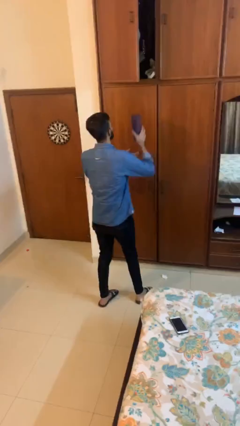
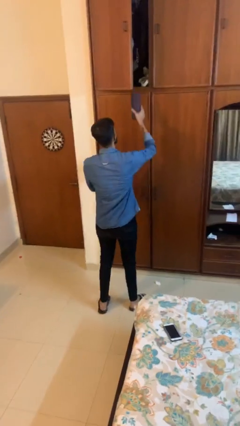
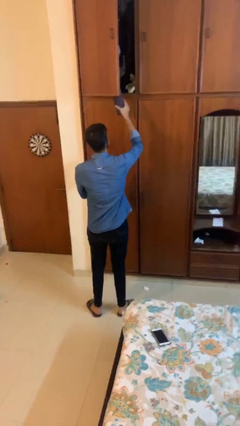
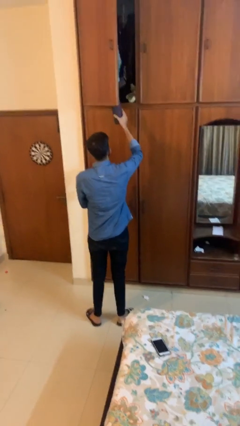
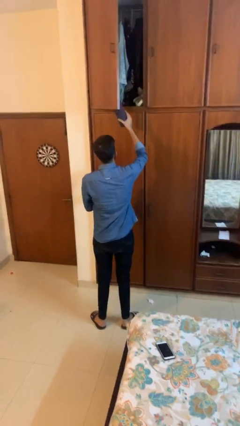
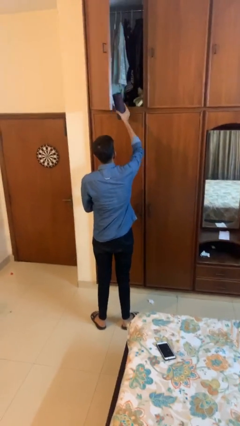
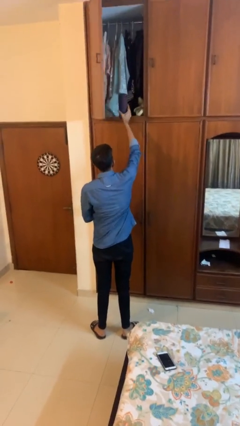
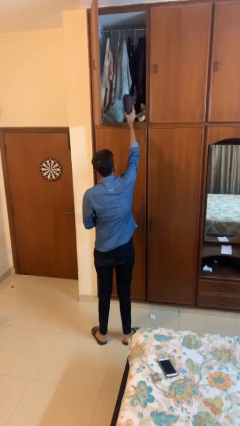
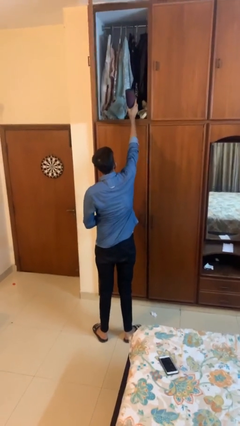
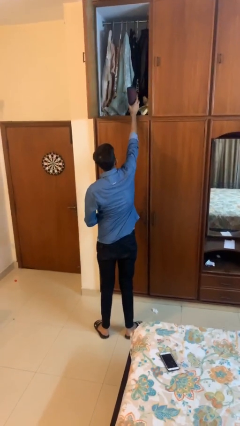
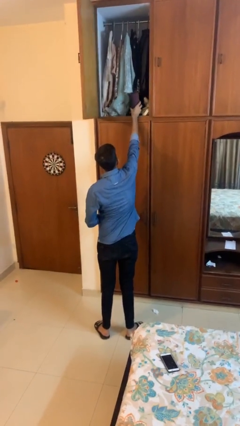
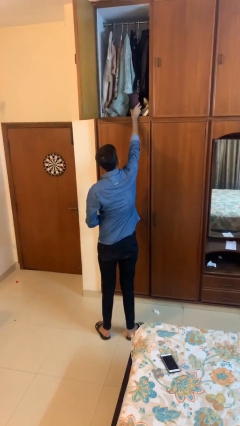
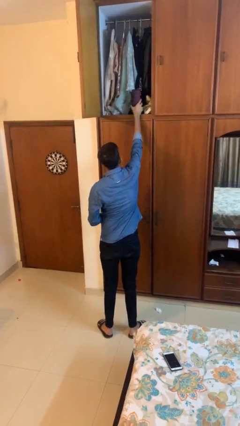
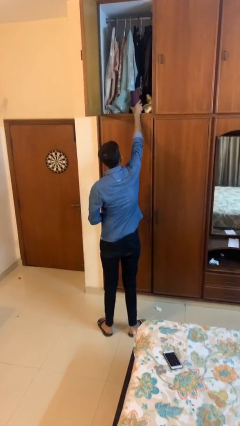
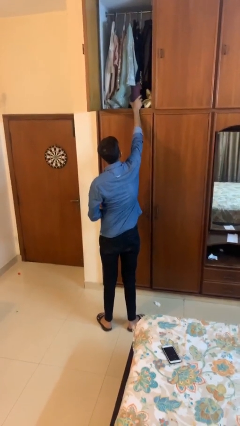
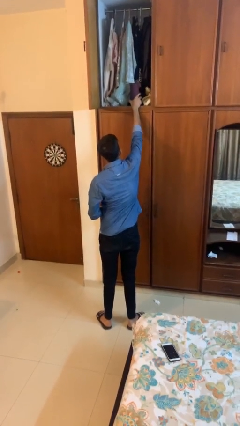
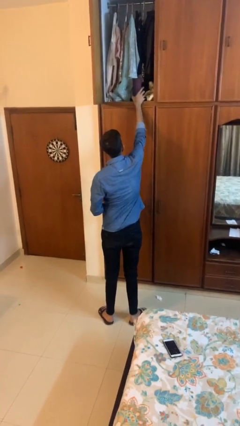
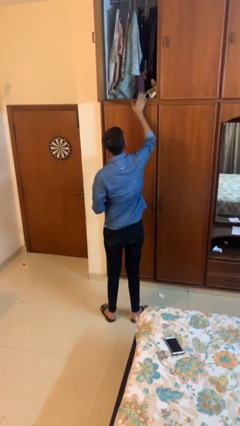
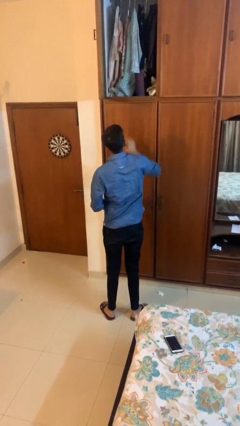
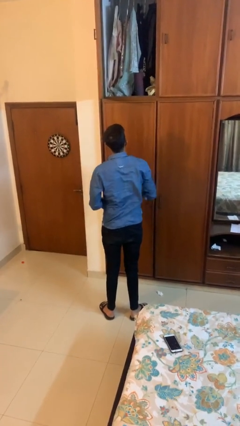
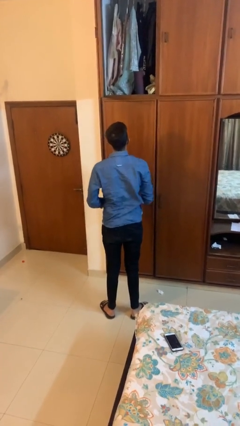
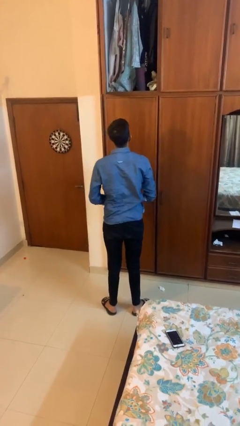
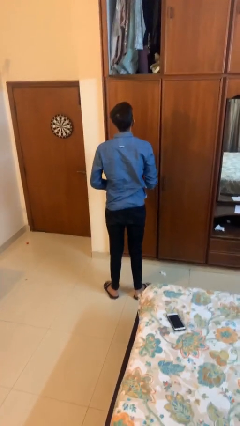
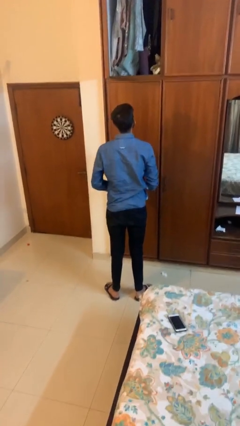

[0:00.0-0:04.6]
person puts down object on shelf

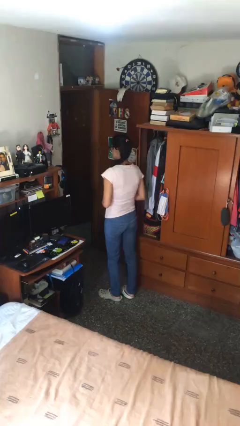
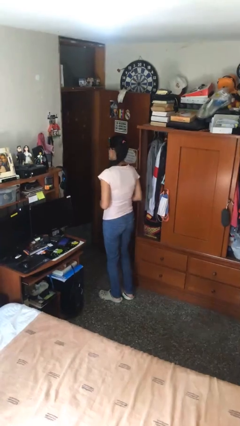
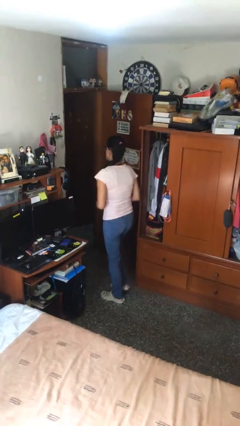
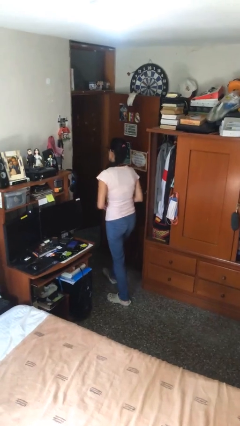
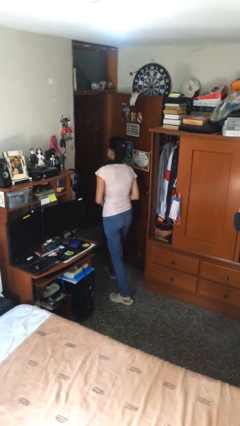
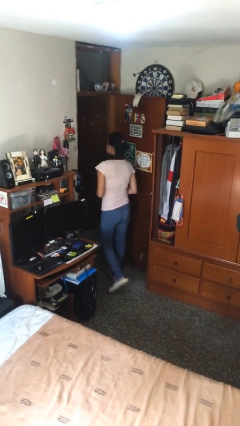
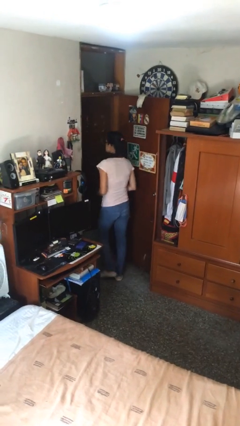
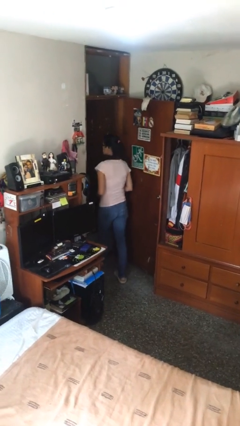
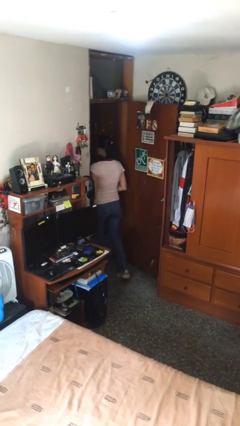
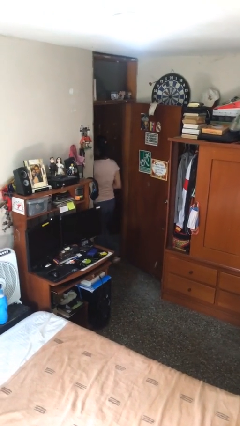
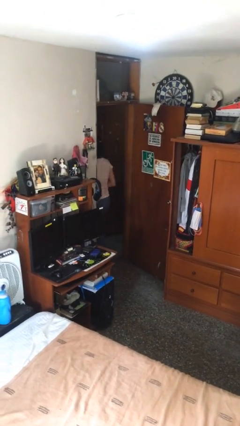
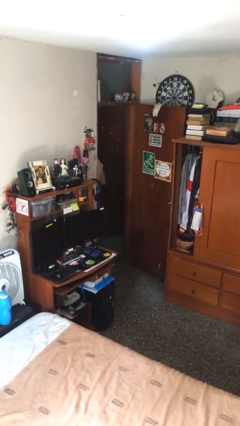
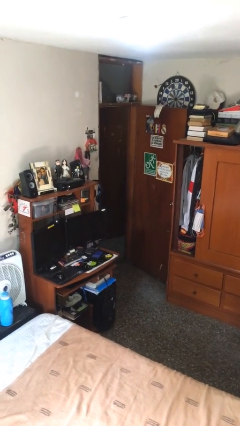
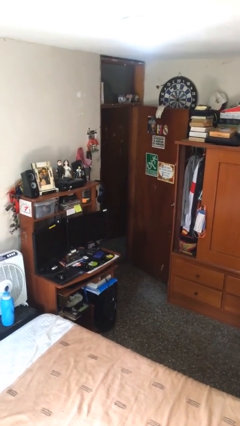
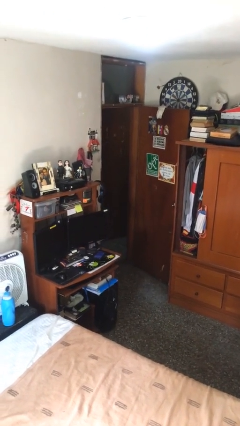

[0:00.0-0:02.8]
person exits scene through structure

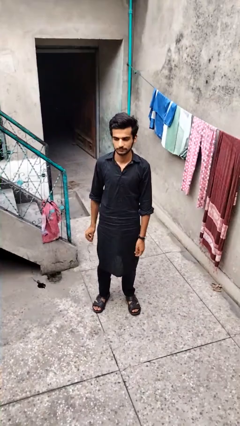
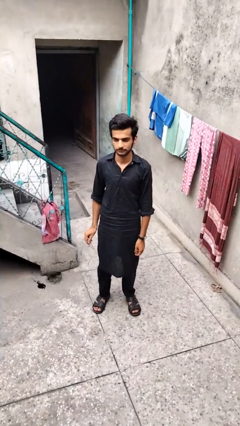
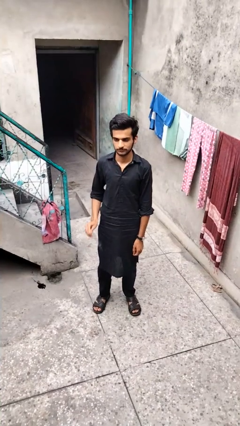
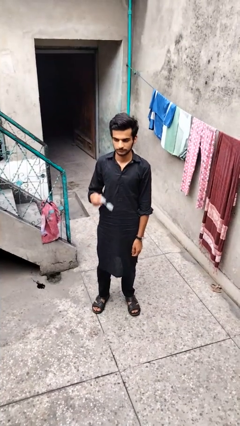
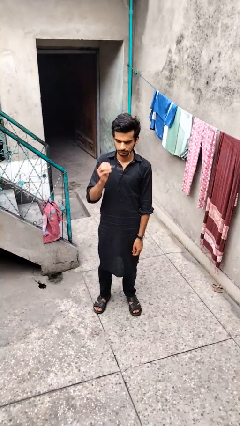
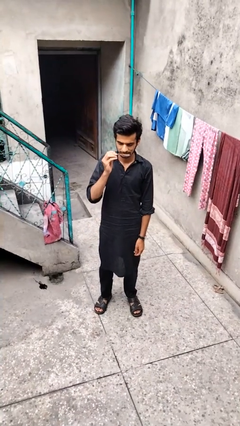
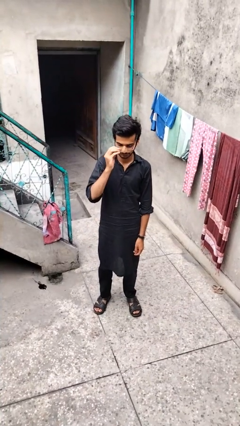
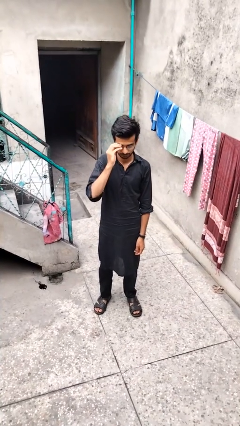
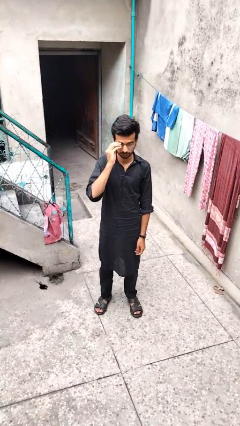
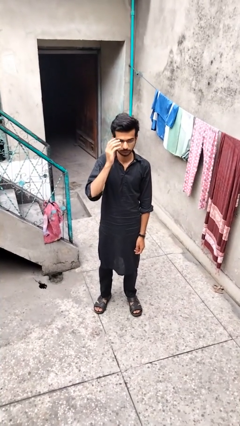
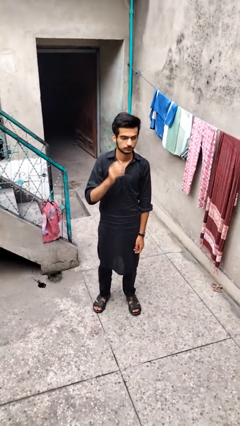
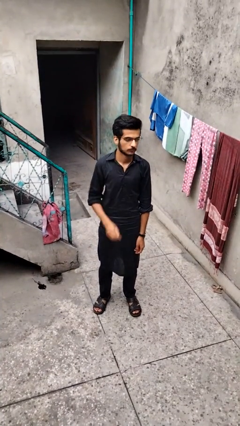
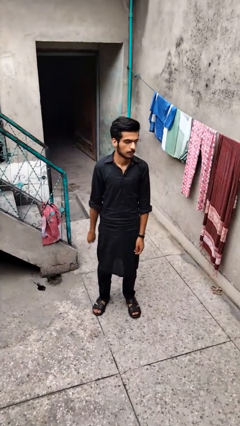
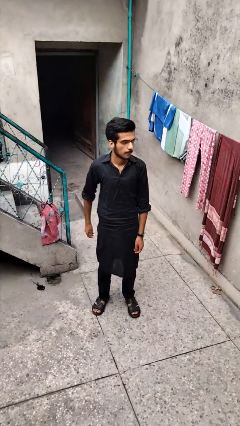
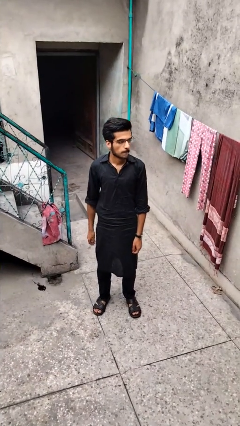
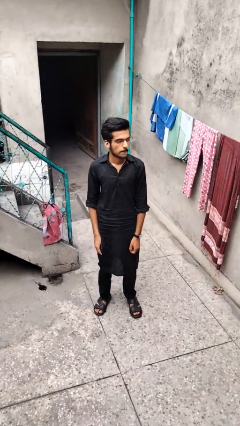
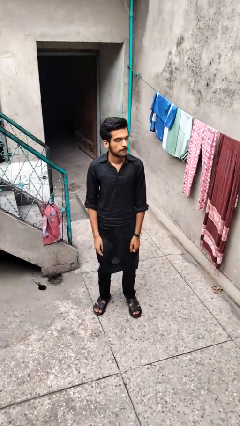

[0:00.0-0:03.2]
person puts on glasses

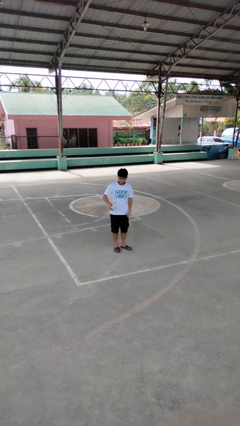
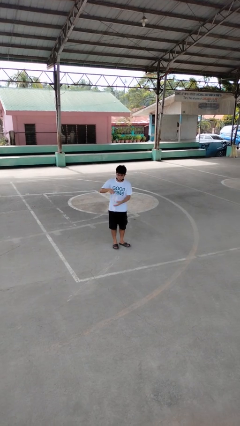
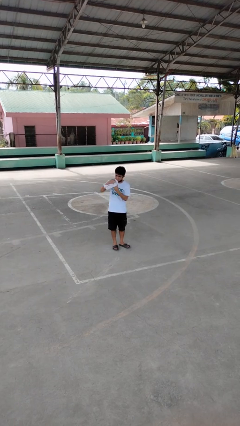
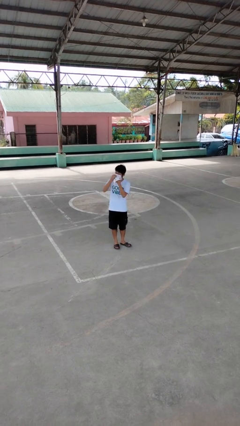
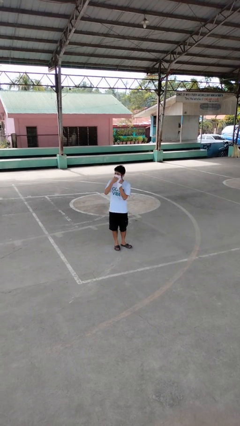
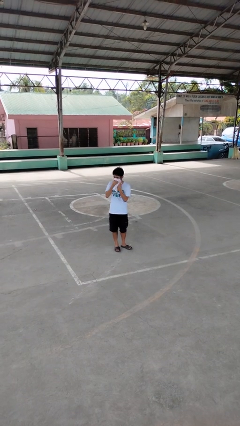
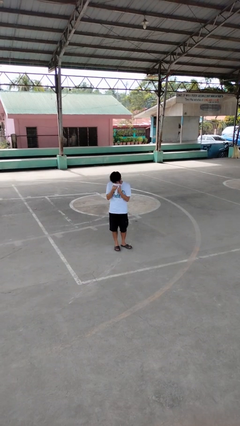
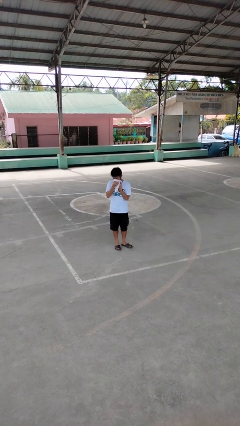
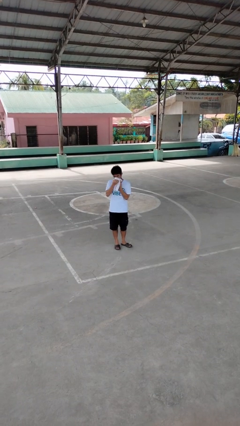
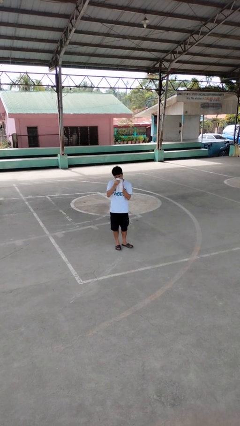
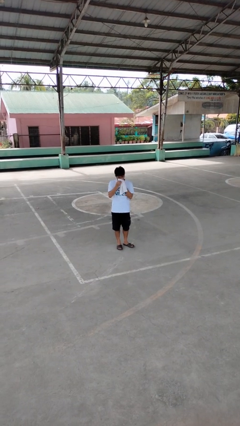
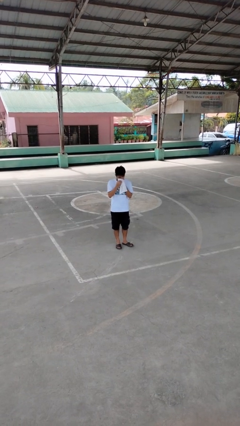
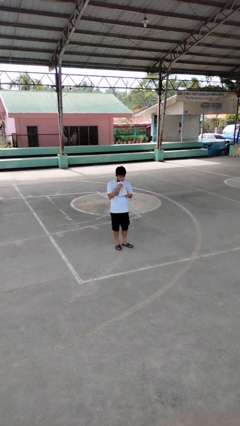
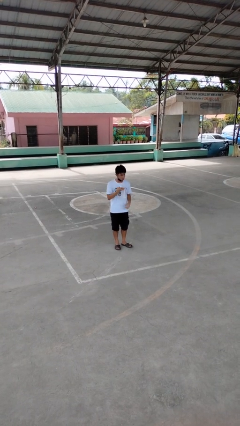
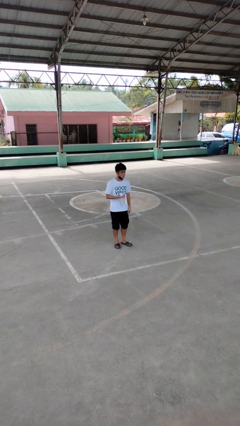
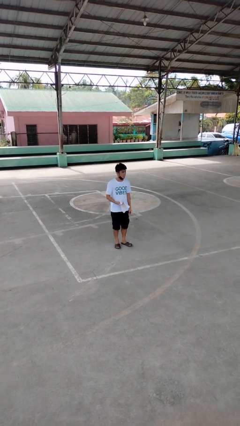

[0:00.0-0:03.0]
person blows nose

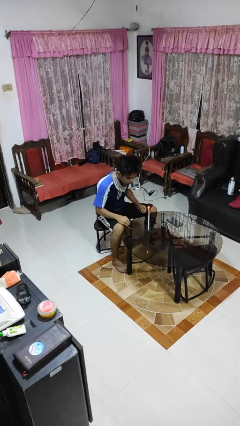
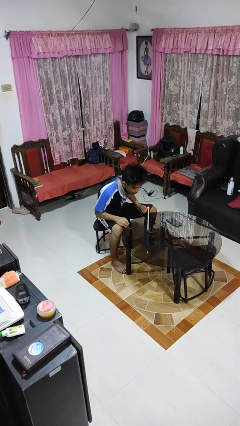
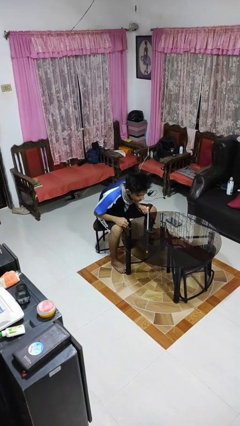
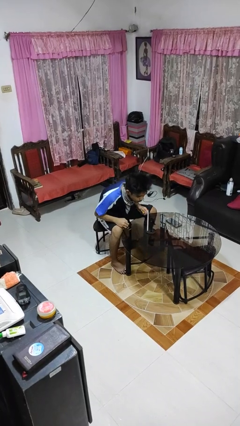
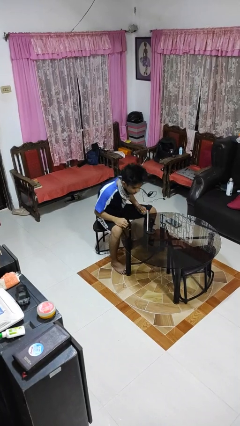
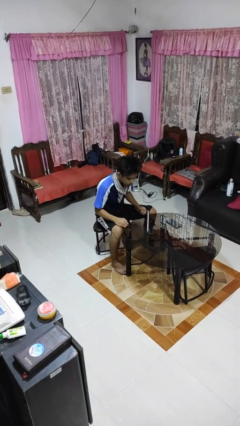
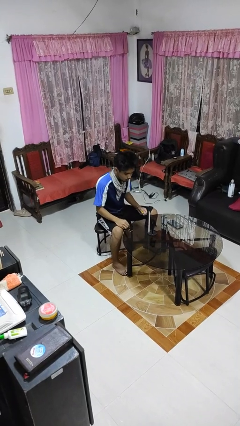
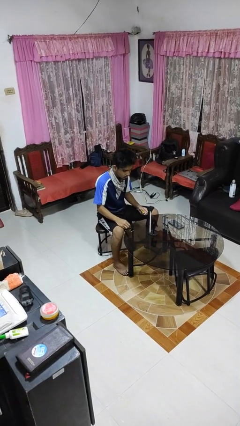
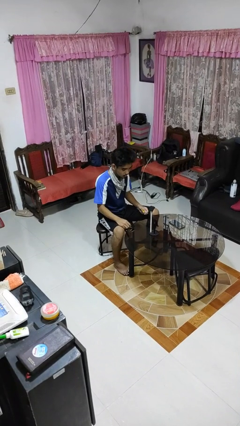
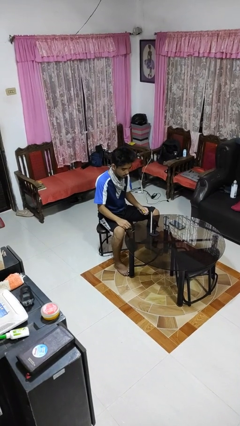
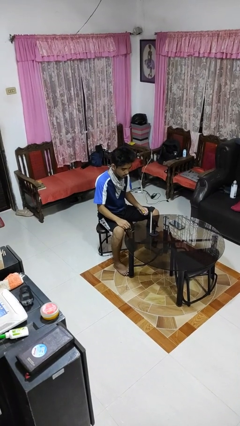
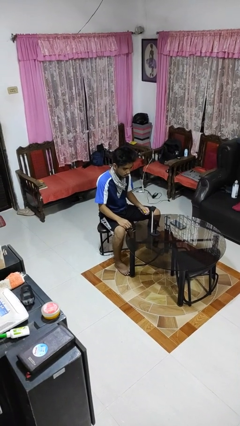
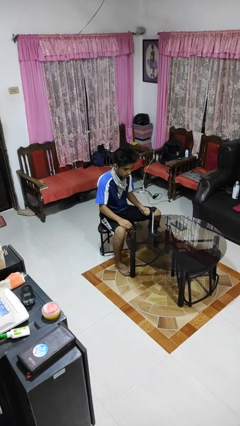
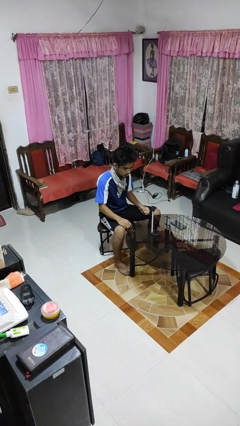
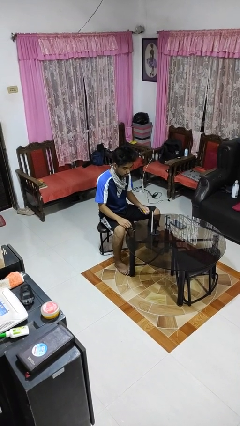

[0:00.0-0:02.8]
person extinguishes candle

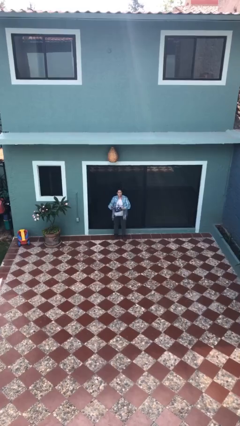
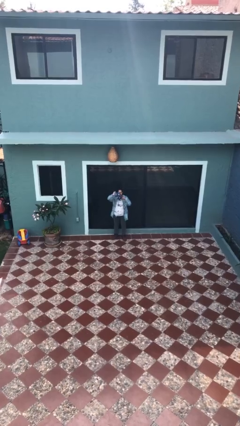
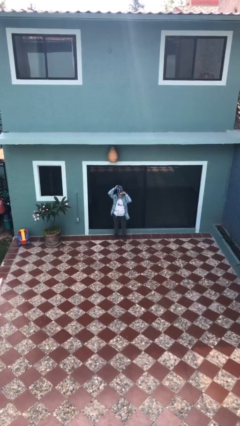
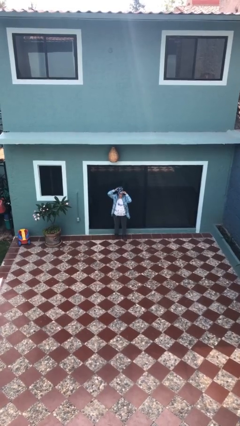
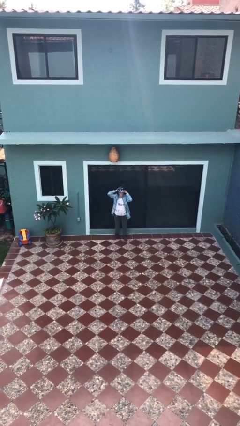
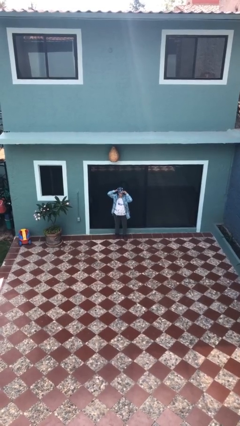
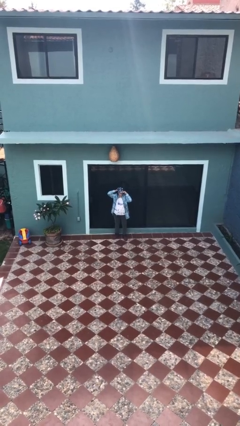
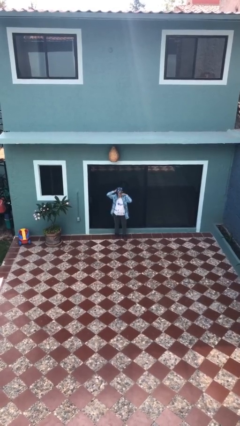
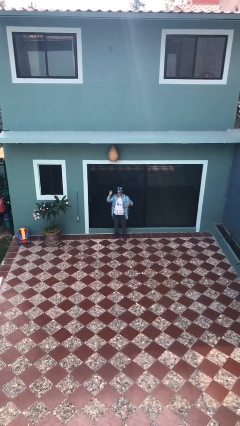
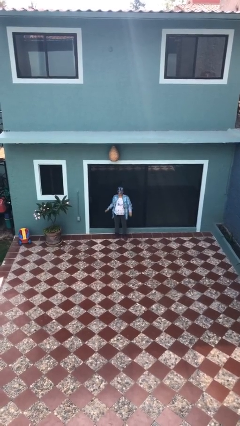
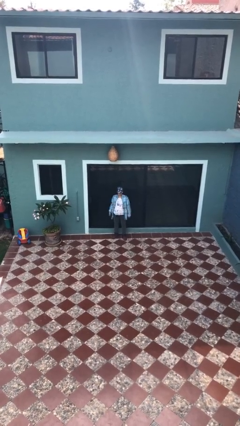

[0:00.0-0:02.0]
person puts on hat
